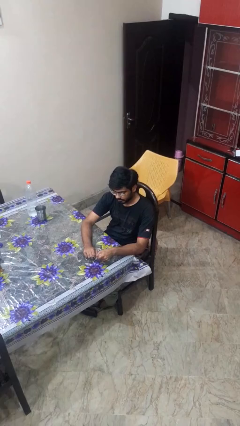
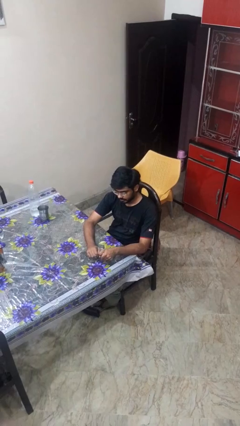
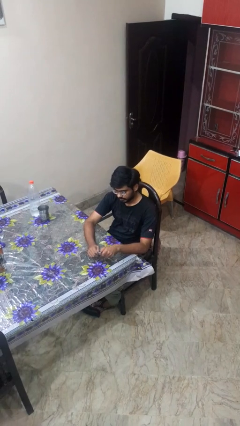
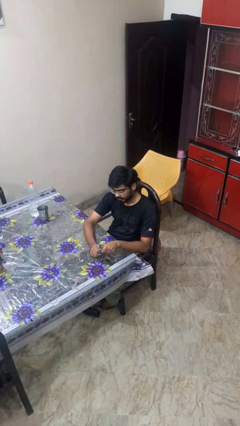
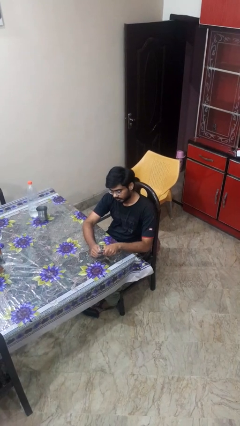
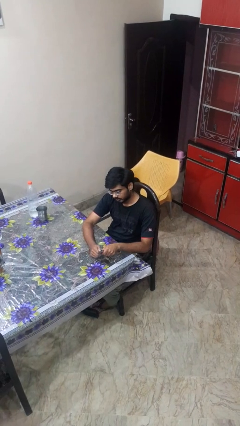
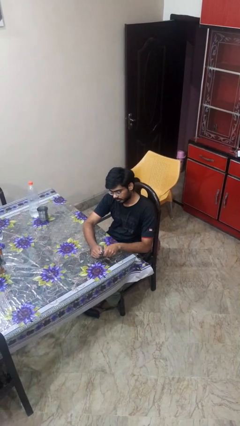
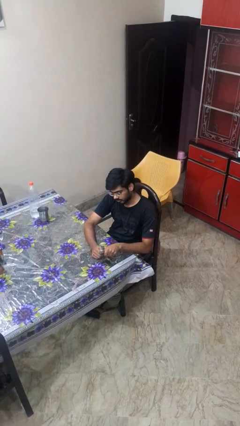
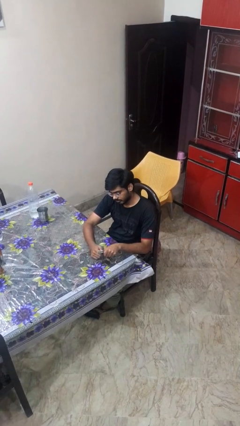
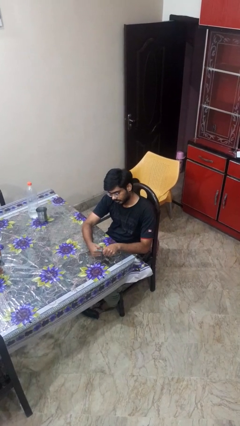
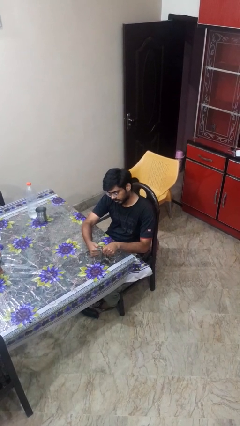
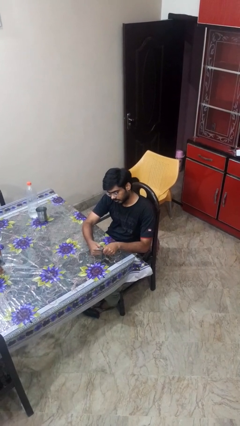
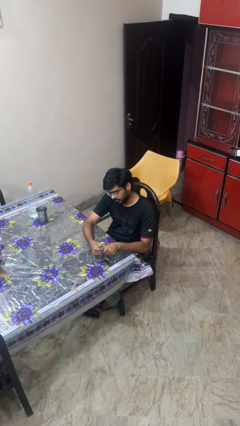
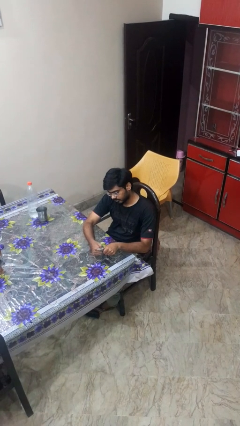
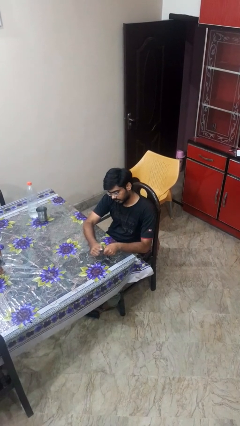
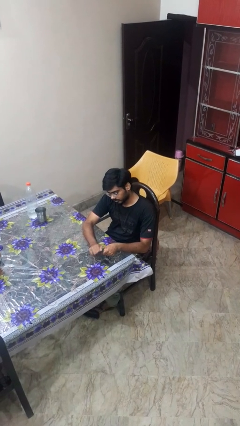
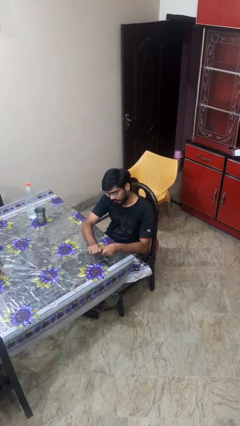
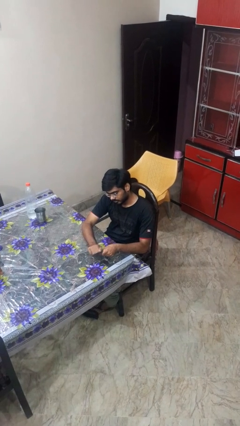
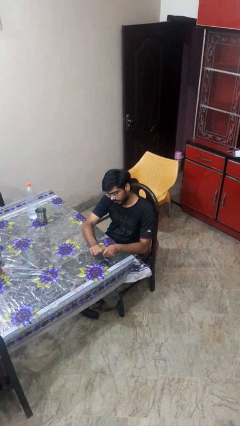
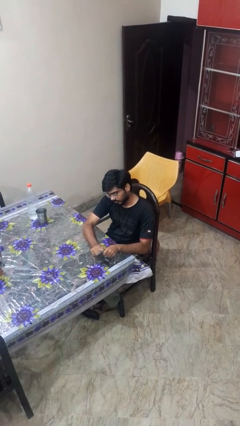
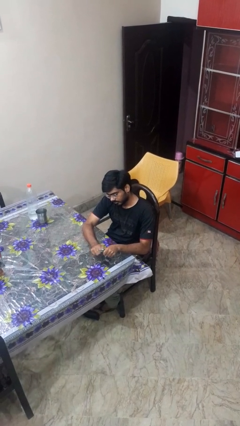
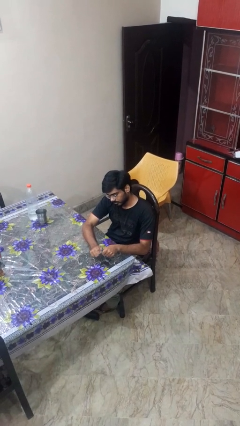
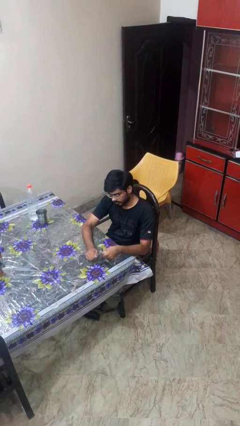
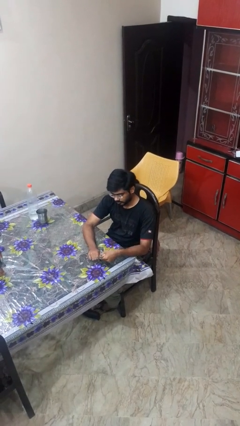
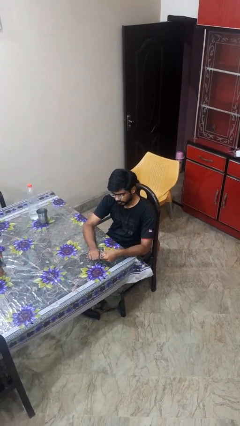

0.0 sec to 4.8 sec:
person files fingernails

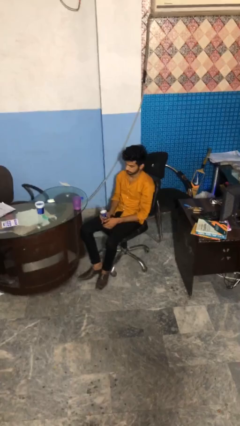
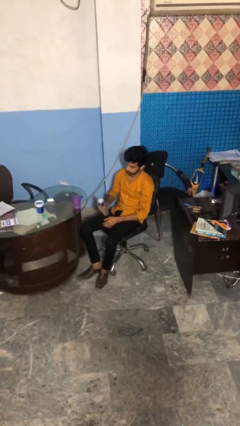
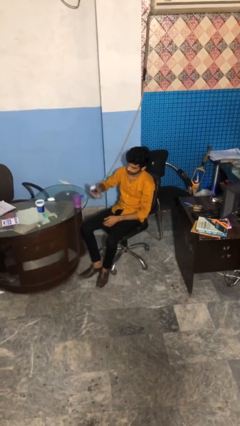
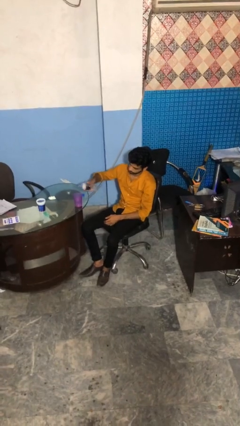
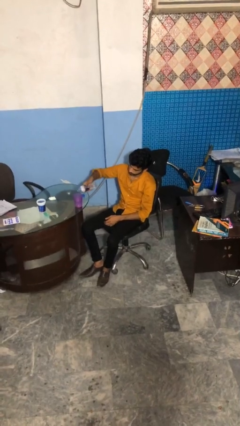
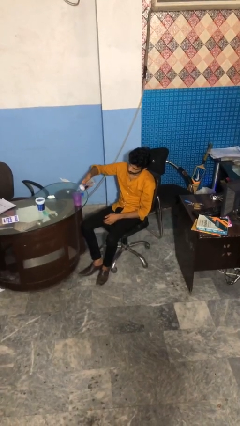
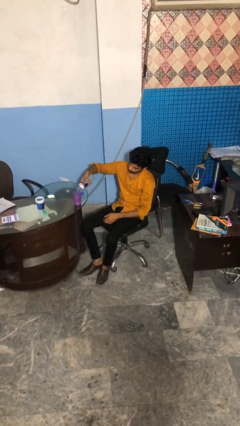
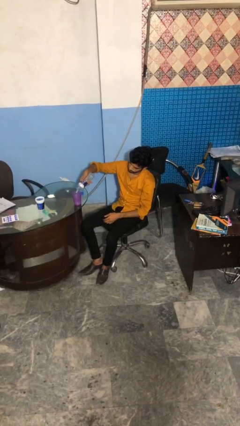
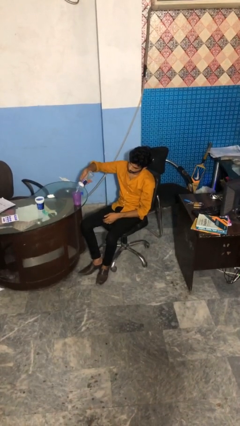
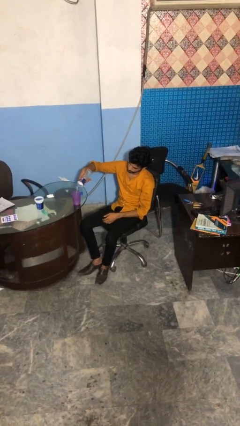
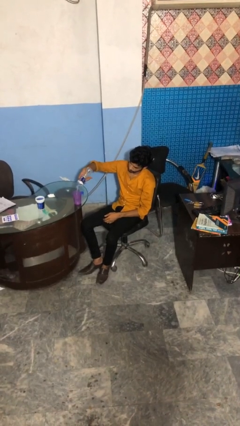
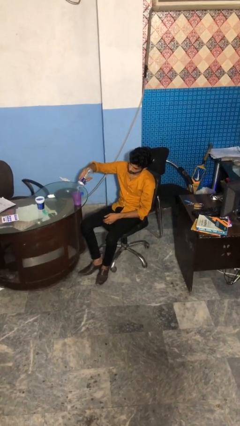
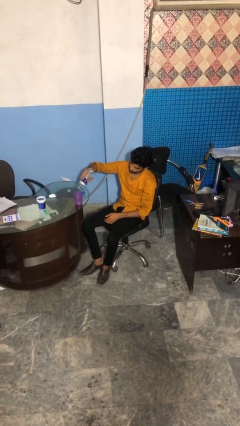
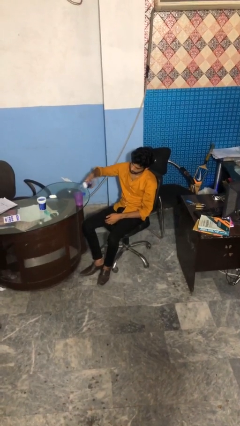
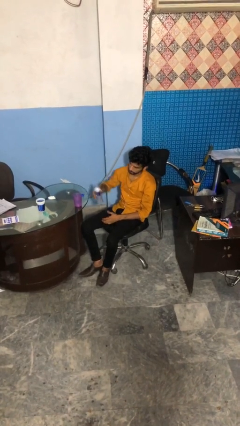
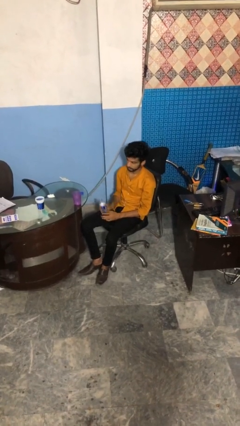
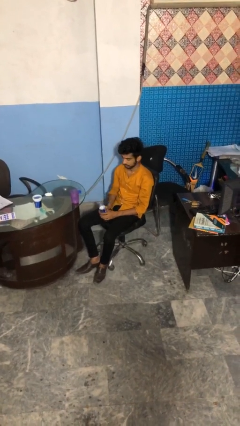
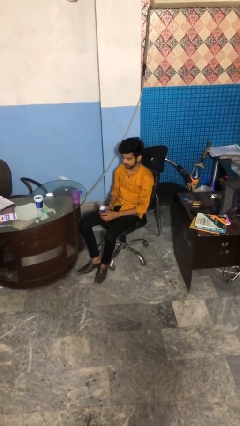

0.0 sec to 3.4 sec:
person pours liquid into cup

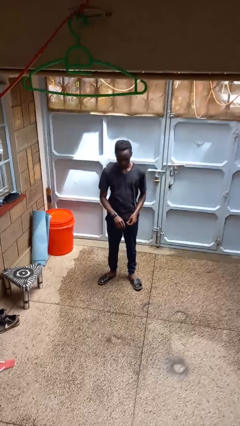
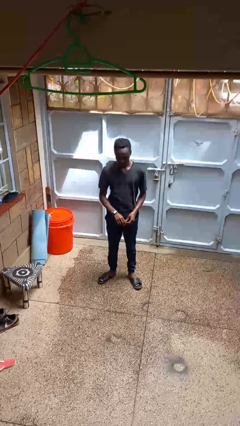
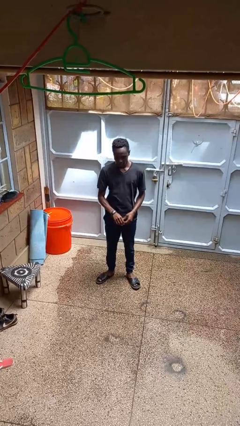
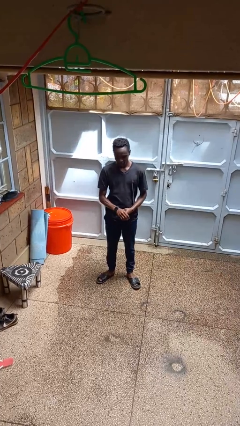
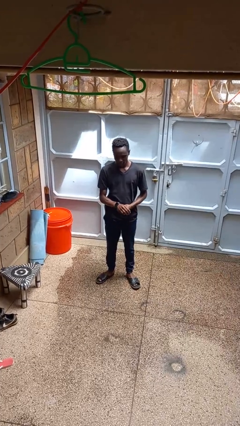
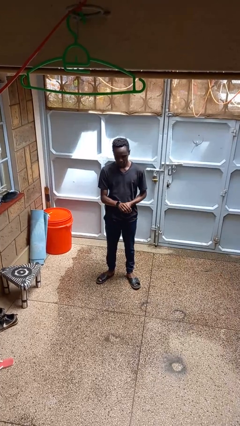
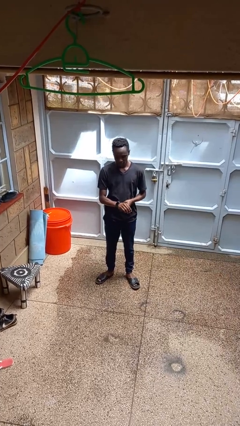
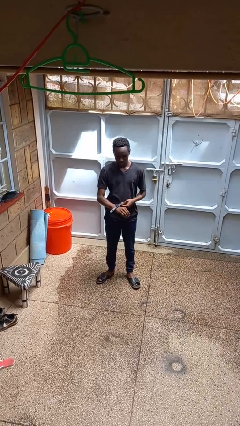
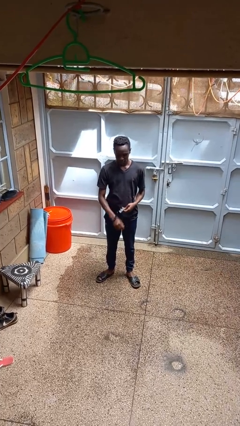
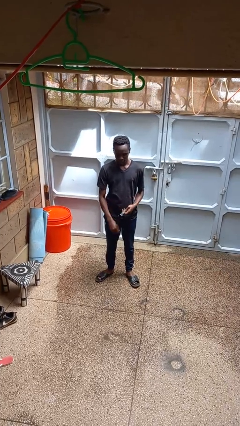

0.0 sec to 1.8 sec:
person takes off wristwatch

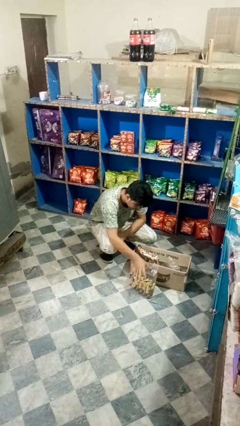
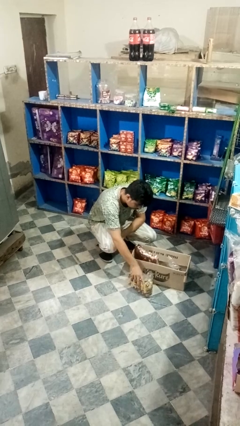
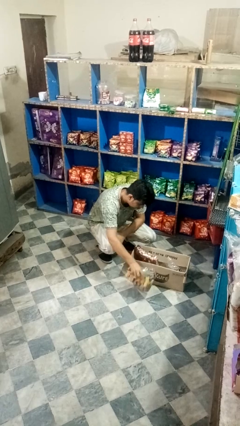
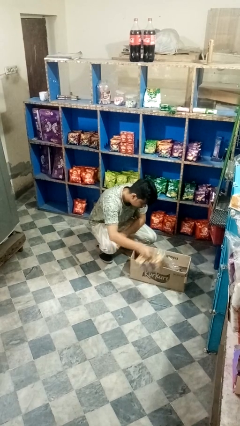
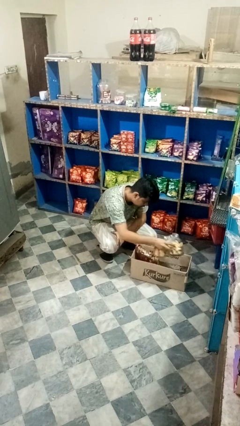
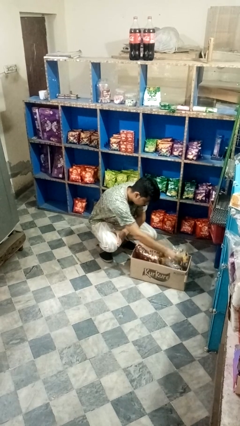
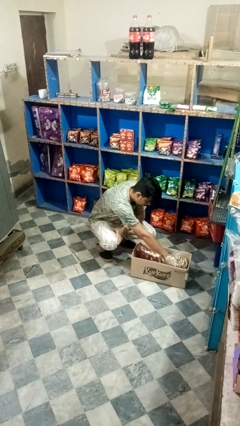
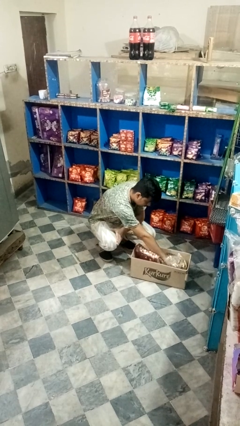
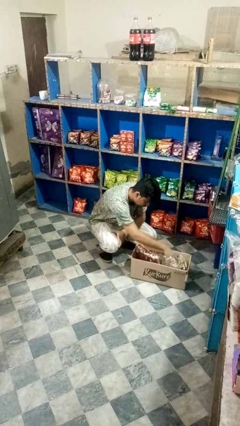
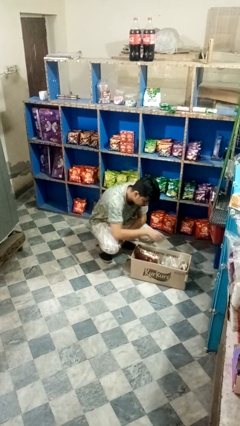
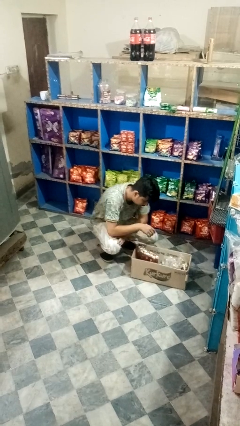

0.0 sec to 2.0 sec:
person puts object into box

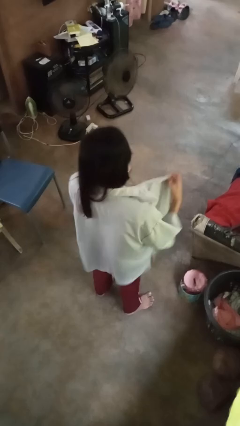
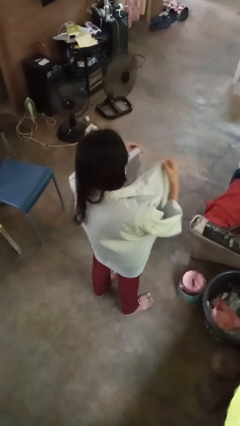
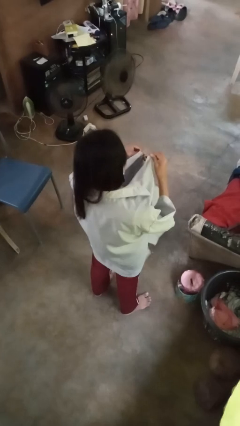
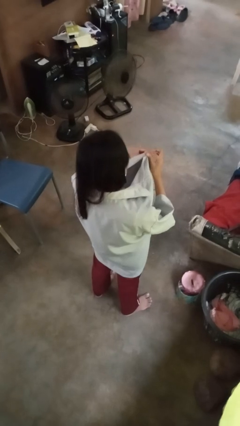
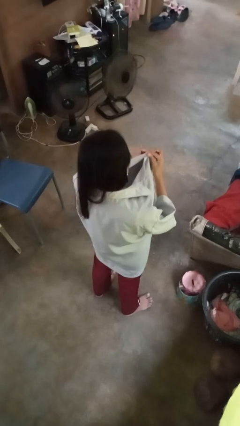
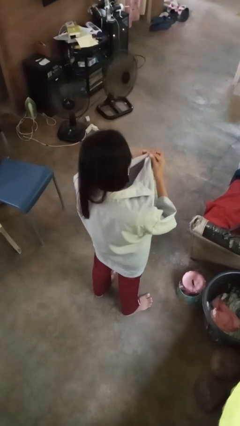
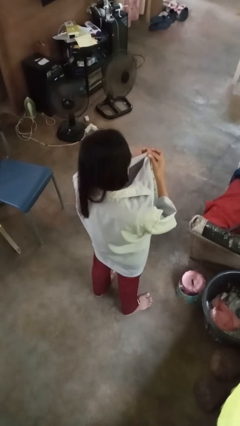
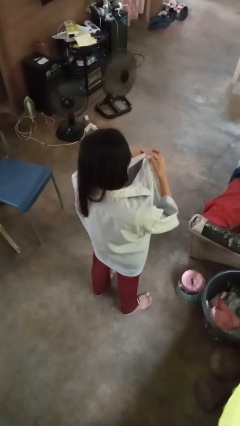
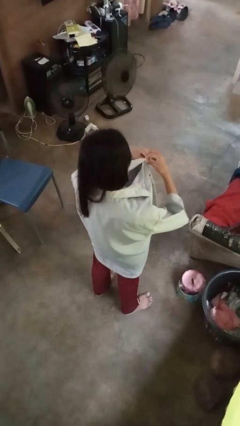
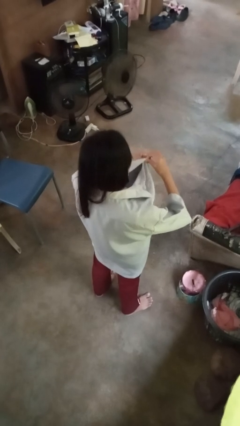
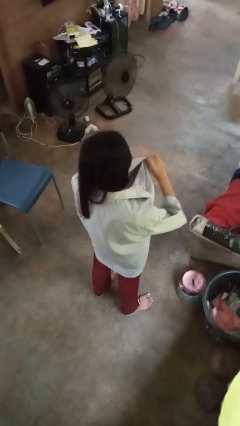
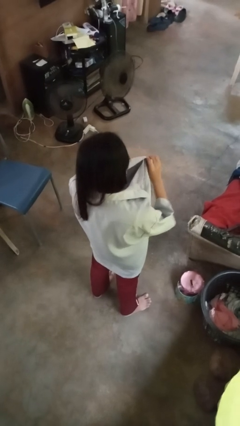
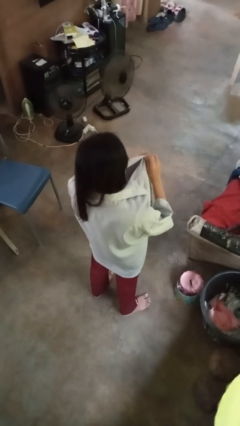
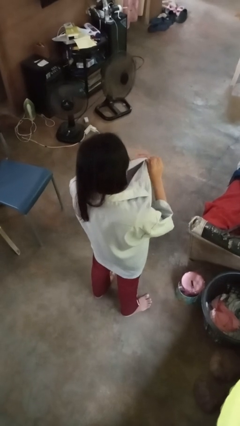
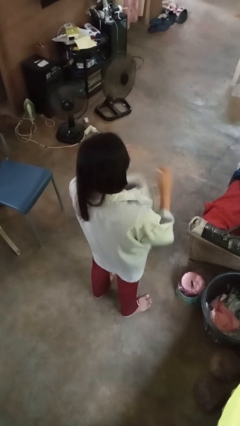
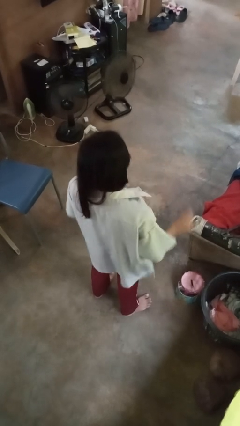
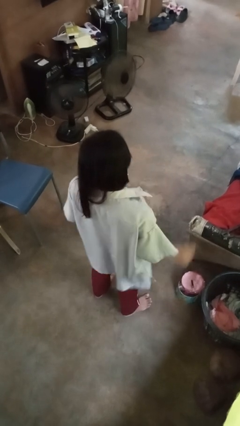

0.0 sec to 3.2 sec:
person buttons shirt

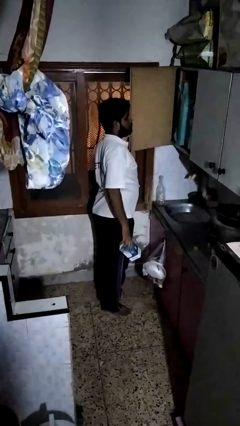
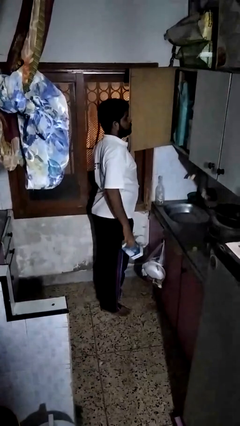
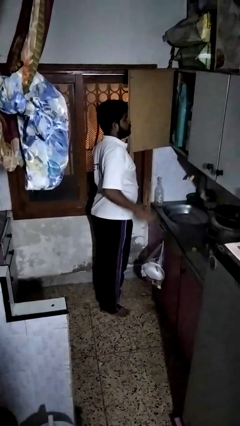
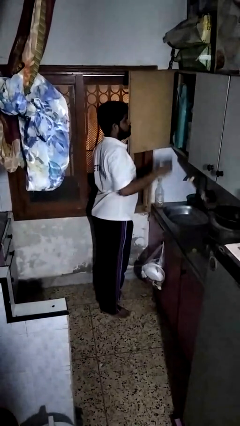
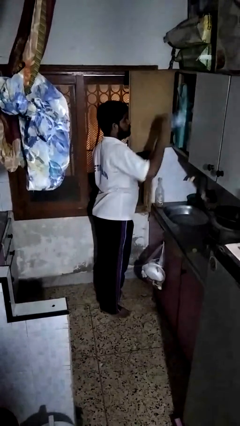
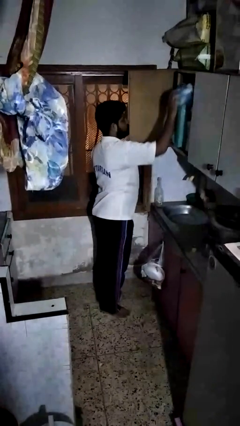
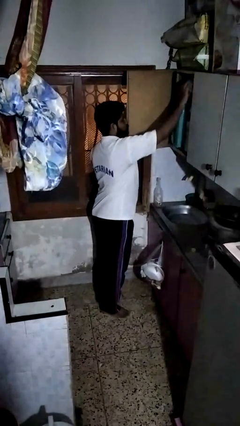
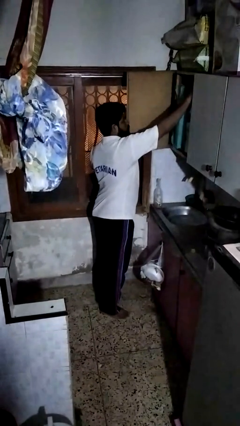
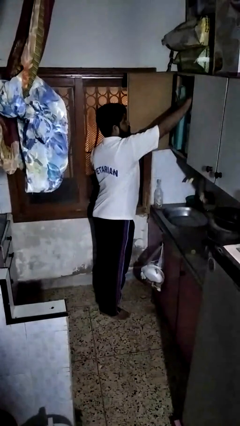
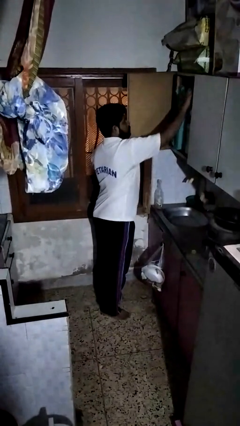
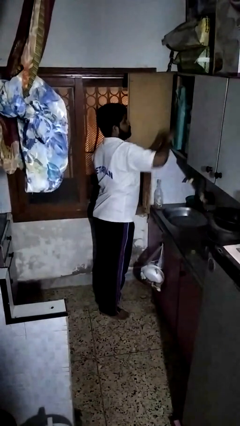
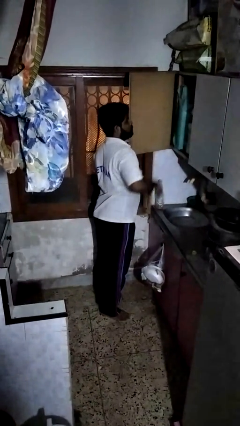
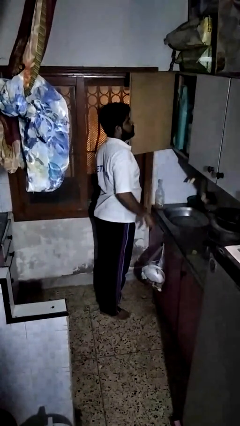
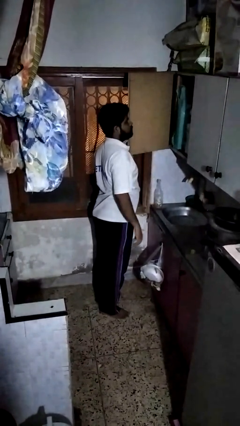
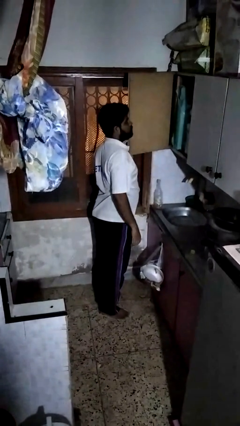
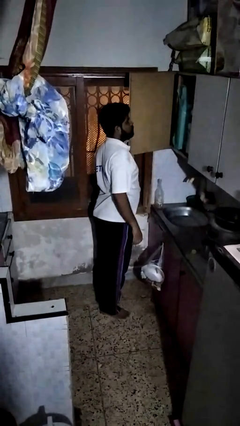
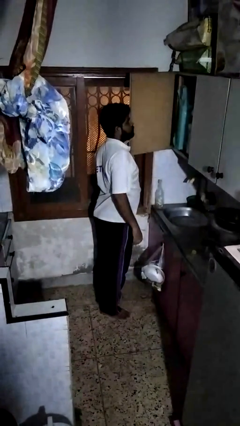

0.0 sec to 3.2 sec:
person puts down object into cabinet
